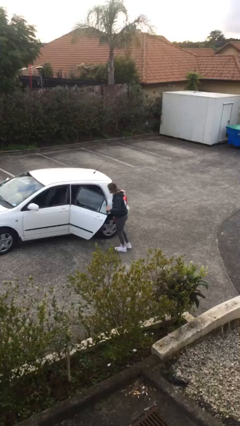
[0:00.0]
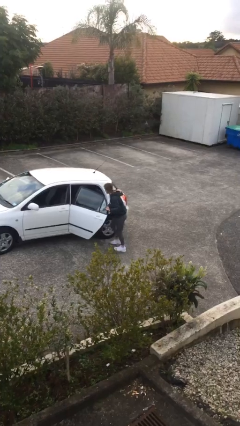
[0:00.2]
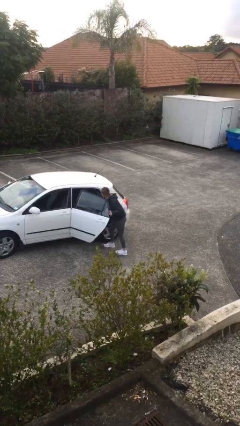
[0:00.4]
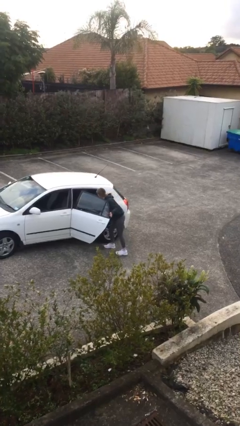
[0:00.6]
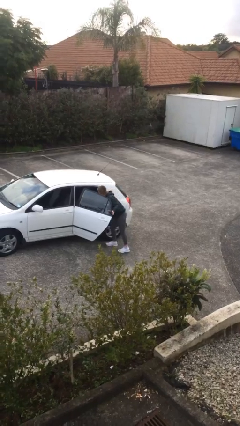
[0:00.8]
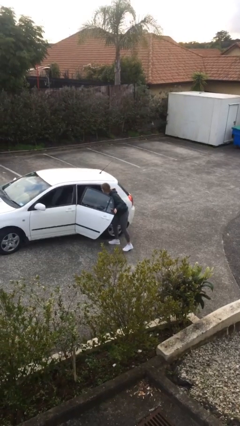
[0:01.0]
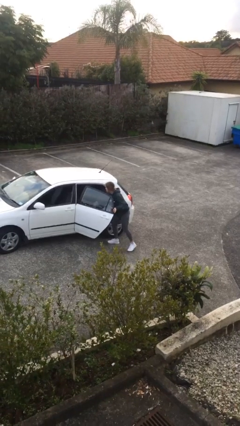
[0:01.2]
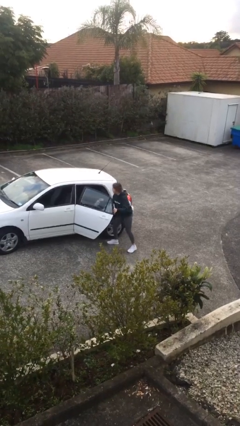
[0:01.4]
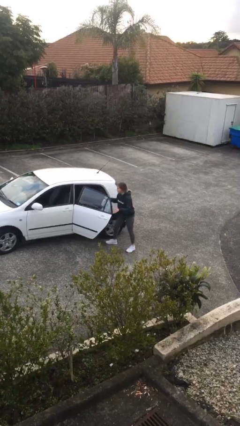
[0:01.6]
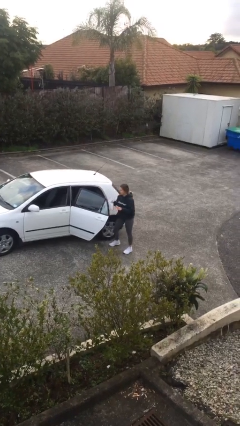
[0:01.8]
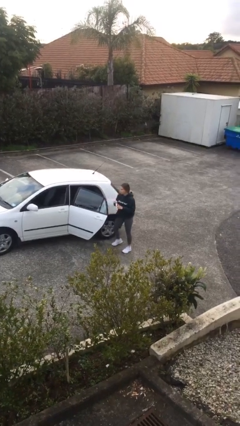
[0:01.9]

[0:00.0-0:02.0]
person unloads car

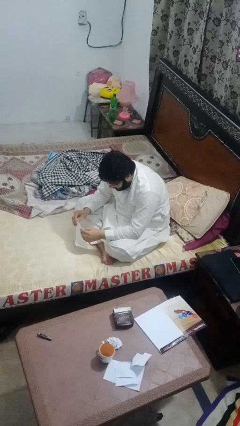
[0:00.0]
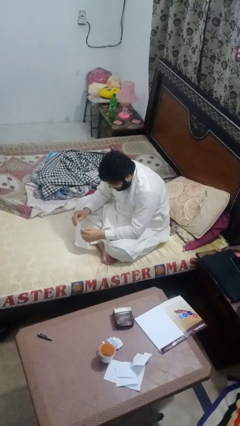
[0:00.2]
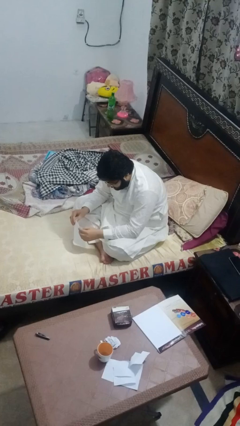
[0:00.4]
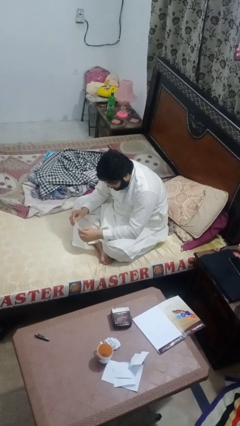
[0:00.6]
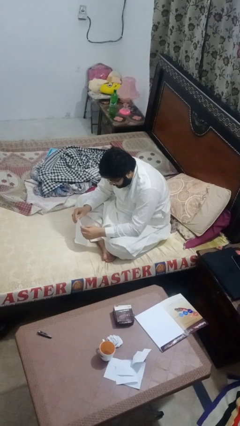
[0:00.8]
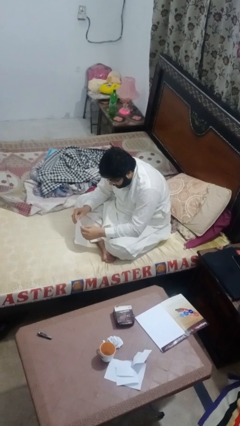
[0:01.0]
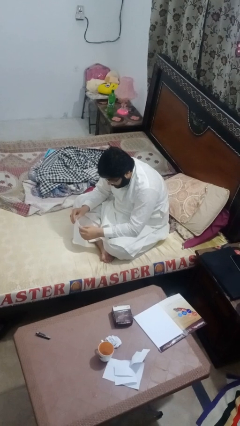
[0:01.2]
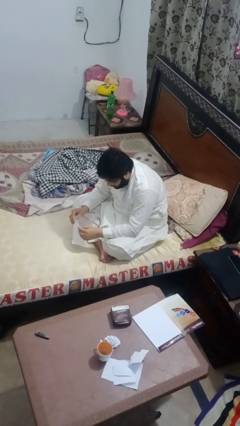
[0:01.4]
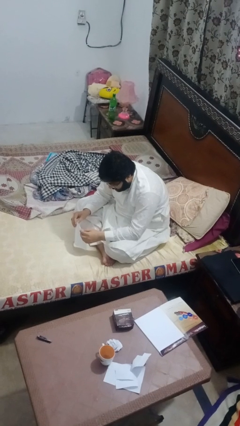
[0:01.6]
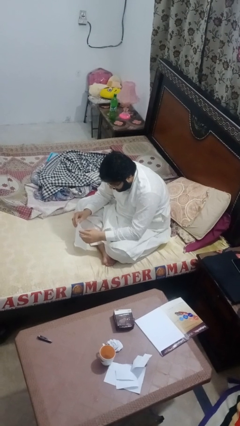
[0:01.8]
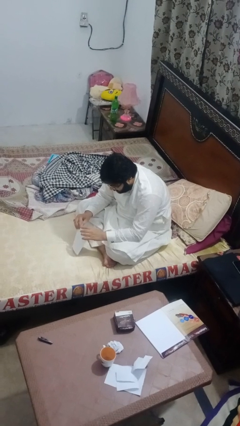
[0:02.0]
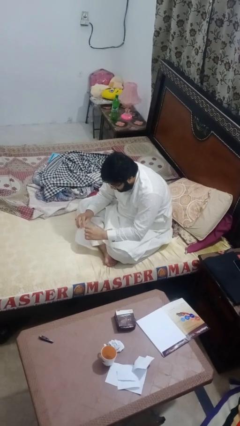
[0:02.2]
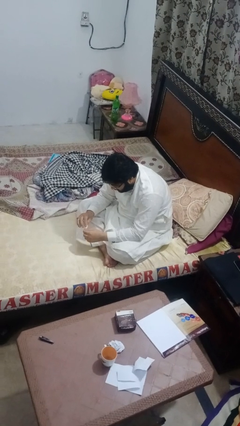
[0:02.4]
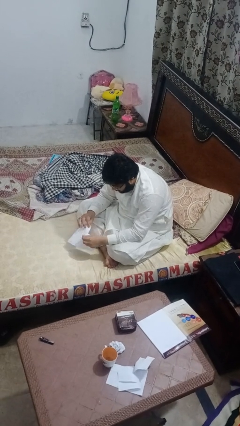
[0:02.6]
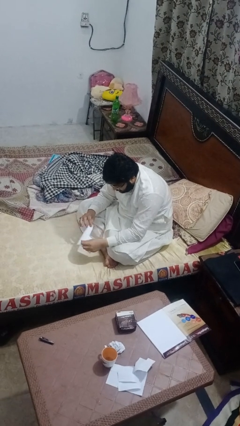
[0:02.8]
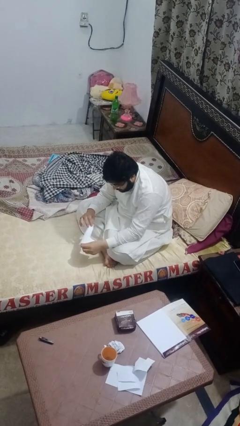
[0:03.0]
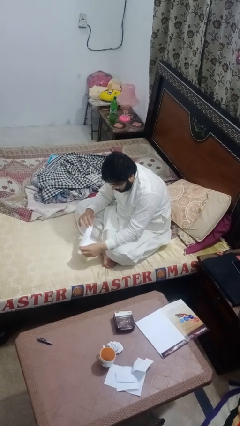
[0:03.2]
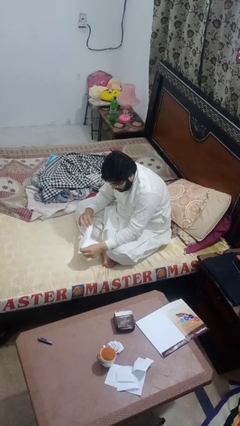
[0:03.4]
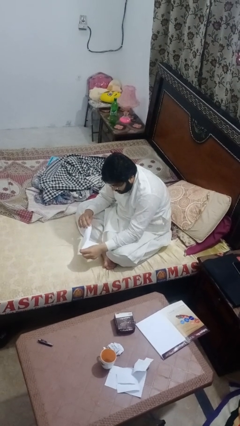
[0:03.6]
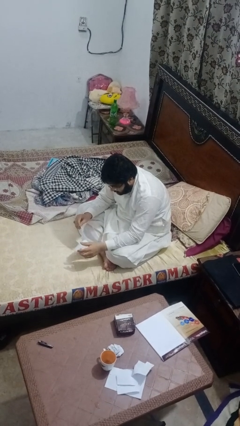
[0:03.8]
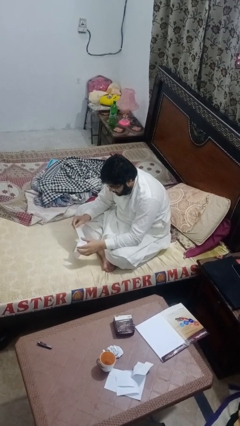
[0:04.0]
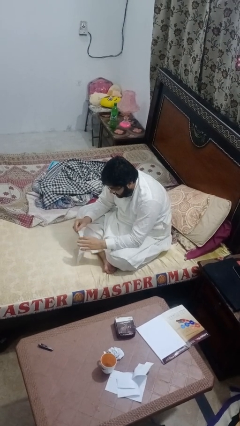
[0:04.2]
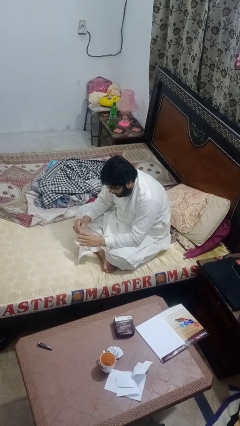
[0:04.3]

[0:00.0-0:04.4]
person tears paper

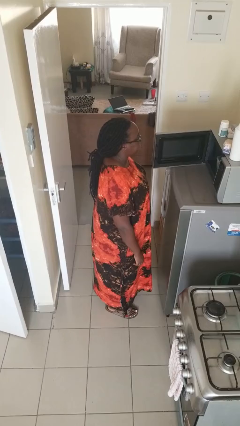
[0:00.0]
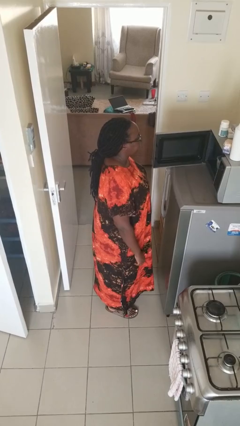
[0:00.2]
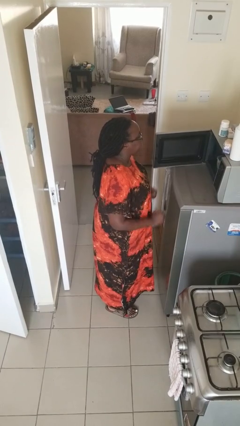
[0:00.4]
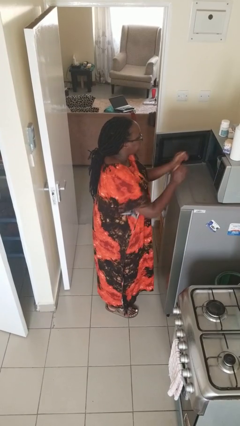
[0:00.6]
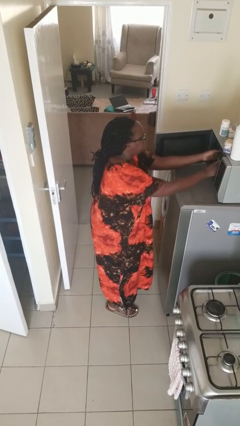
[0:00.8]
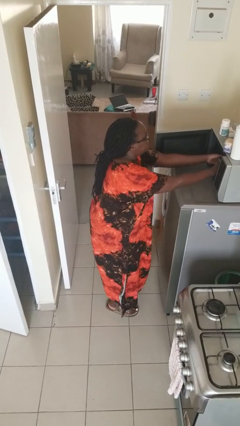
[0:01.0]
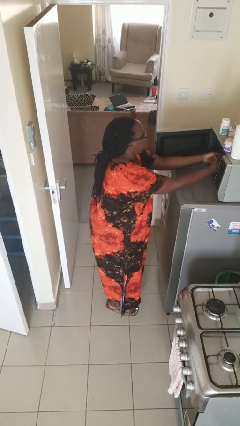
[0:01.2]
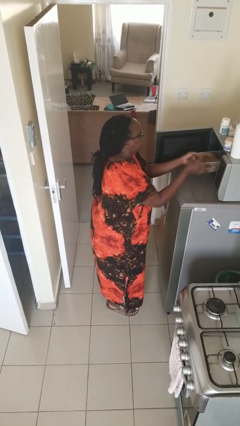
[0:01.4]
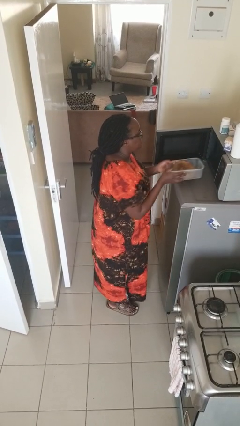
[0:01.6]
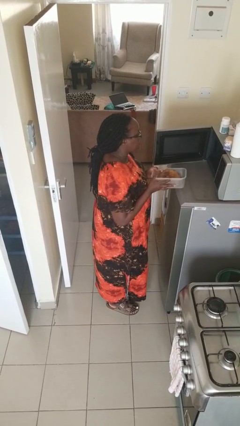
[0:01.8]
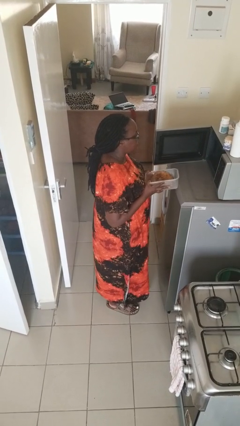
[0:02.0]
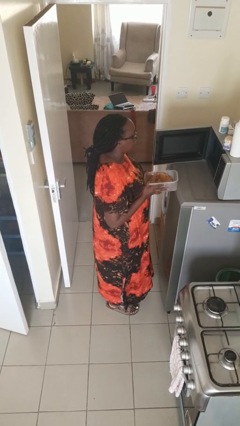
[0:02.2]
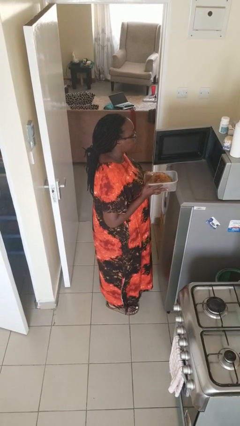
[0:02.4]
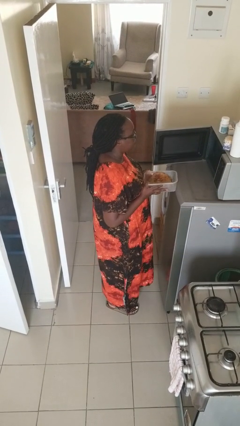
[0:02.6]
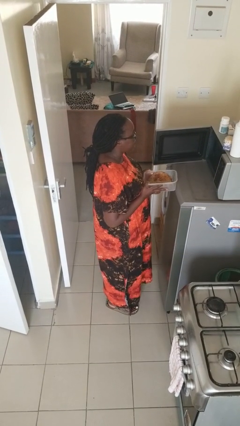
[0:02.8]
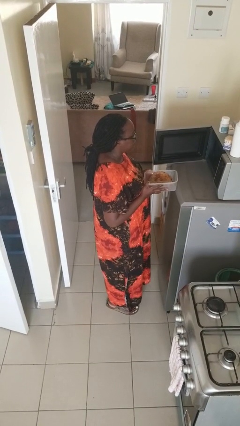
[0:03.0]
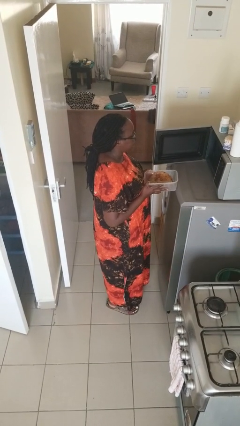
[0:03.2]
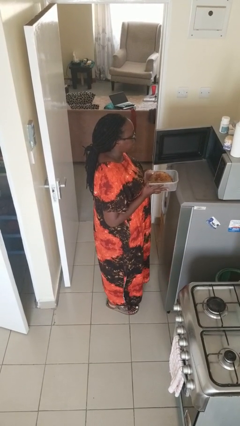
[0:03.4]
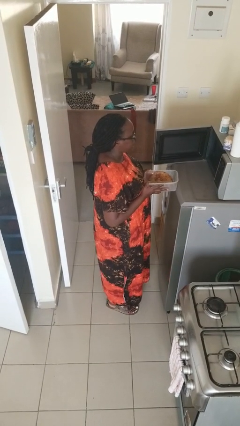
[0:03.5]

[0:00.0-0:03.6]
person takes object from microwave

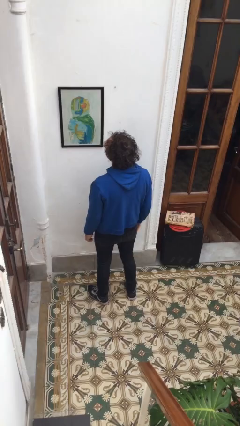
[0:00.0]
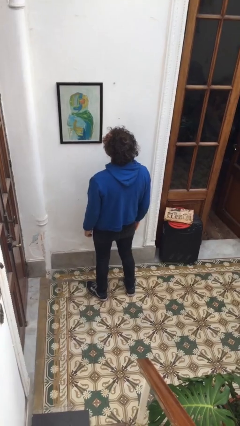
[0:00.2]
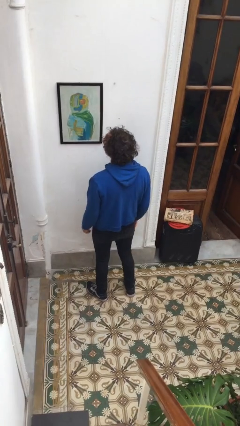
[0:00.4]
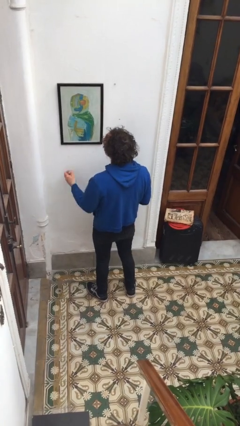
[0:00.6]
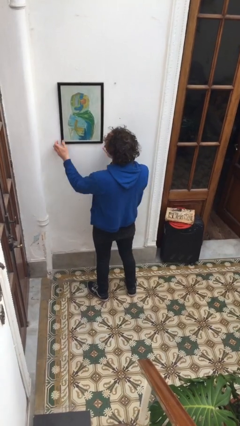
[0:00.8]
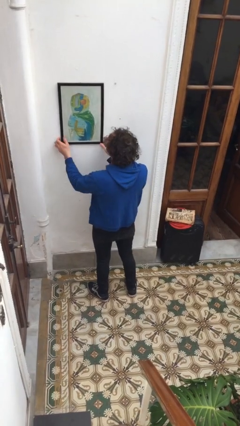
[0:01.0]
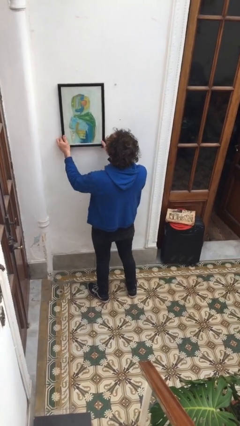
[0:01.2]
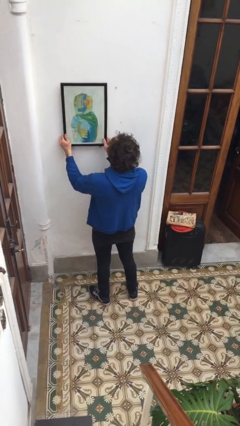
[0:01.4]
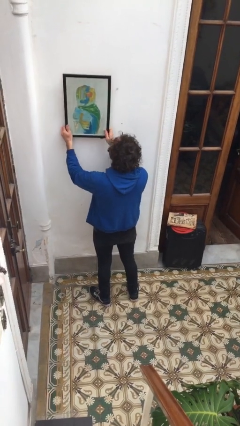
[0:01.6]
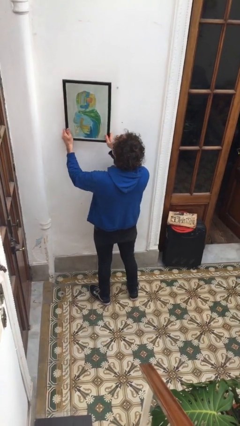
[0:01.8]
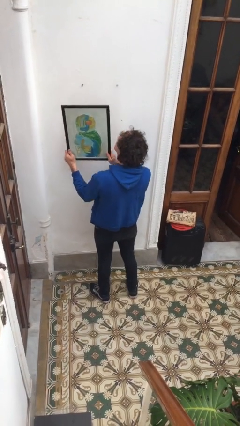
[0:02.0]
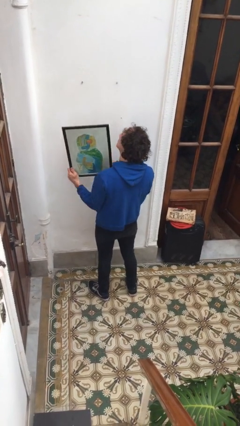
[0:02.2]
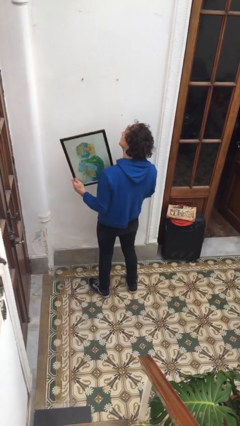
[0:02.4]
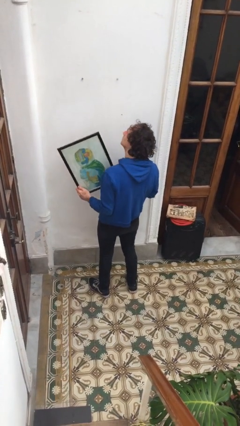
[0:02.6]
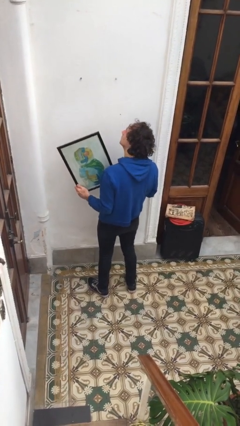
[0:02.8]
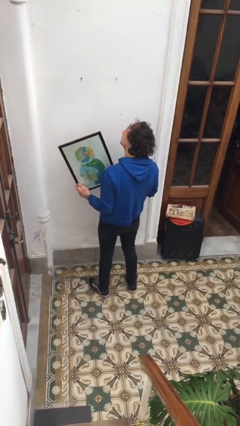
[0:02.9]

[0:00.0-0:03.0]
person takes down picture frame

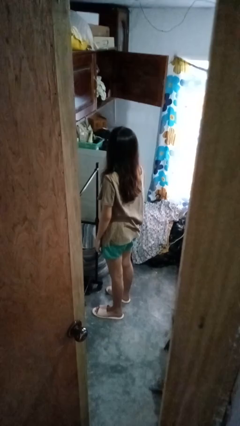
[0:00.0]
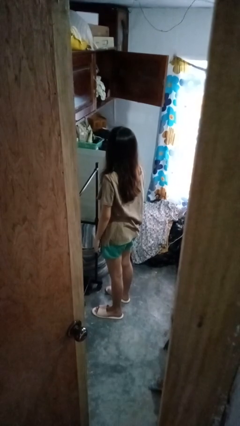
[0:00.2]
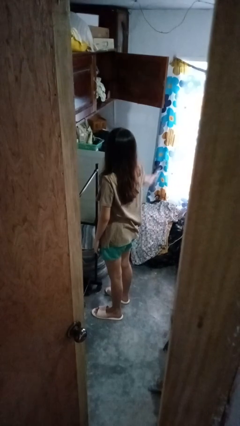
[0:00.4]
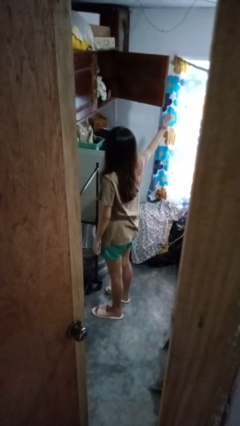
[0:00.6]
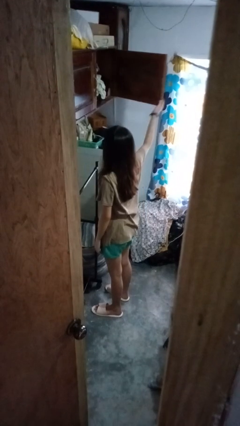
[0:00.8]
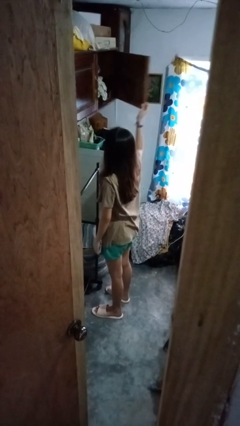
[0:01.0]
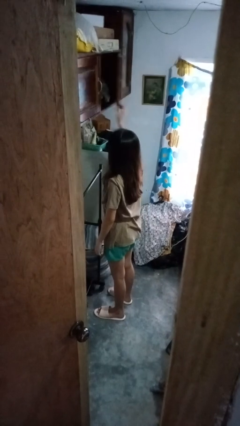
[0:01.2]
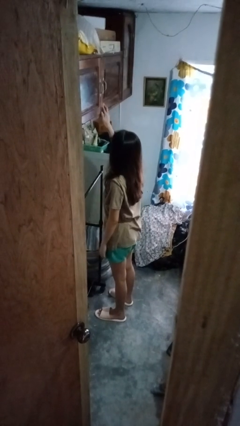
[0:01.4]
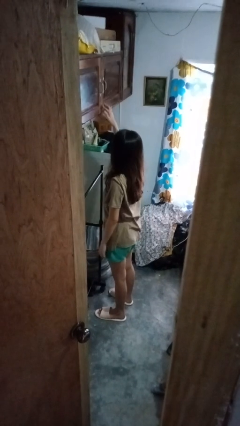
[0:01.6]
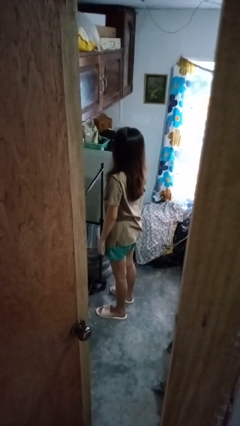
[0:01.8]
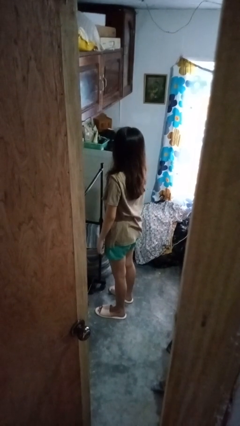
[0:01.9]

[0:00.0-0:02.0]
person closes closet door

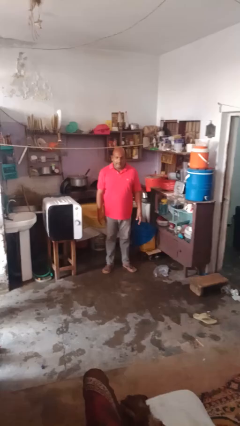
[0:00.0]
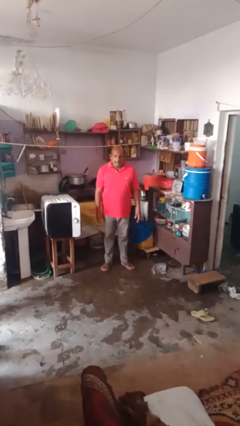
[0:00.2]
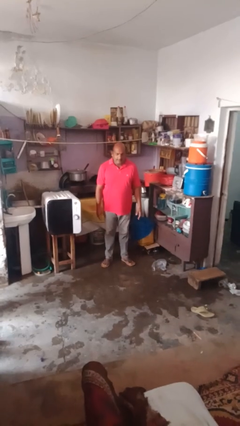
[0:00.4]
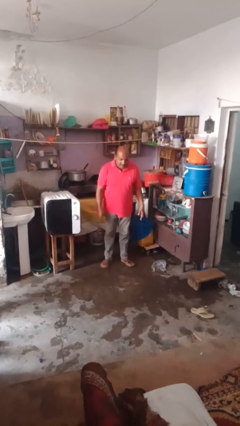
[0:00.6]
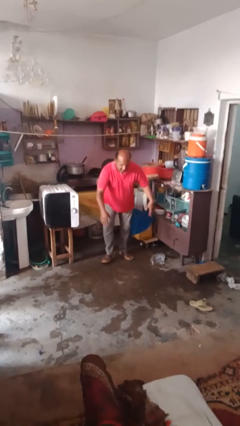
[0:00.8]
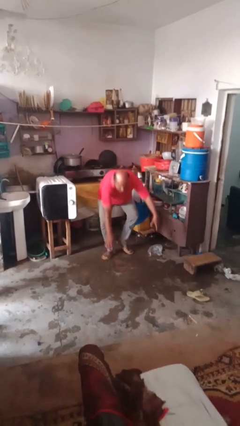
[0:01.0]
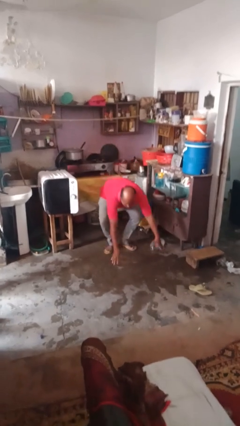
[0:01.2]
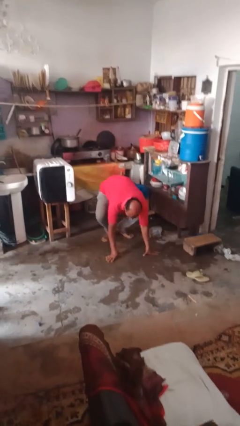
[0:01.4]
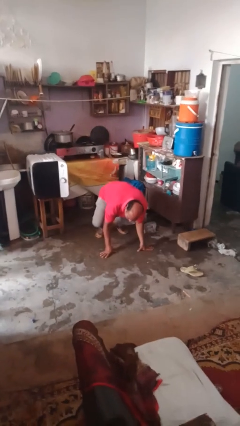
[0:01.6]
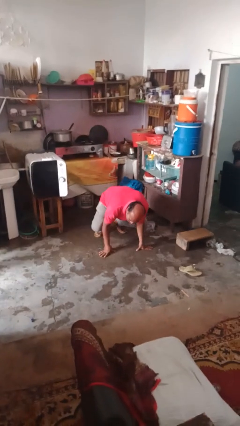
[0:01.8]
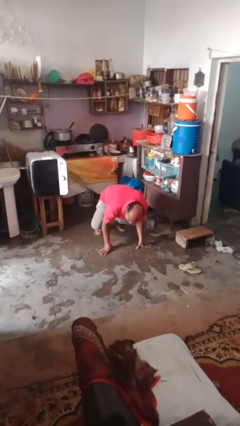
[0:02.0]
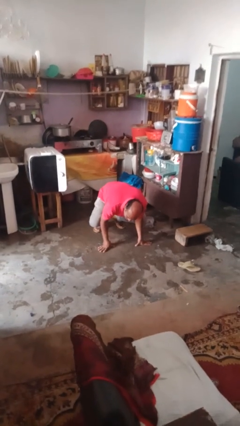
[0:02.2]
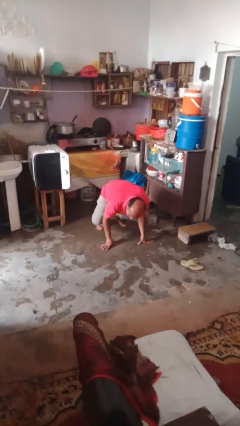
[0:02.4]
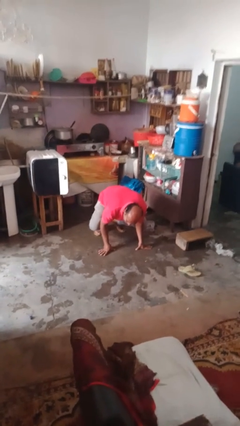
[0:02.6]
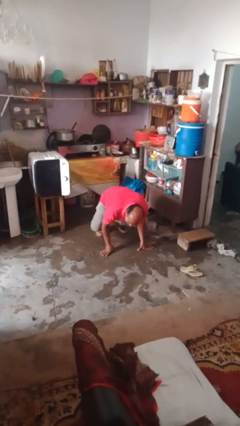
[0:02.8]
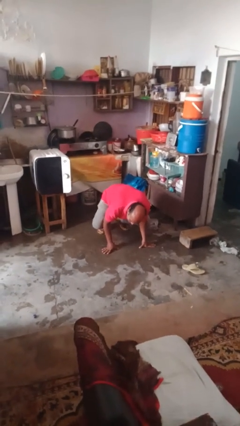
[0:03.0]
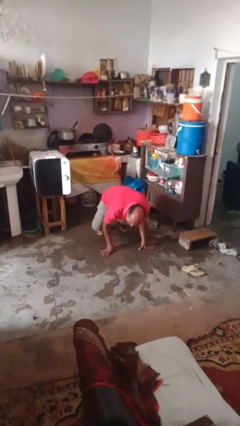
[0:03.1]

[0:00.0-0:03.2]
person falls while standing
